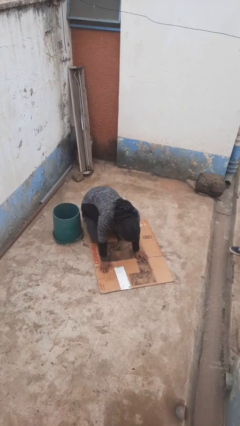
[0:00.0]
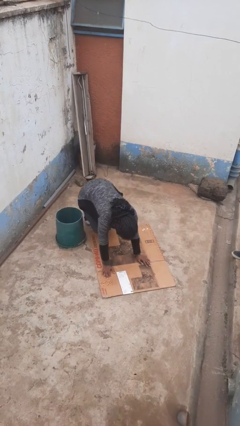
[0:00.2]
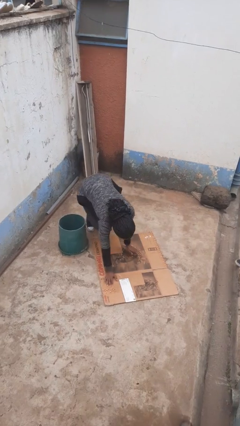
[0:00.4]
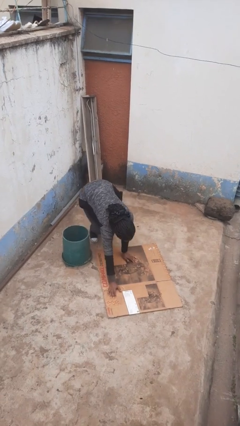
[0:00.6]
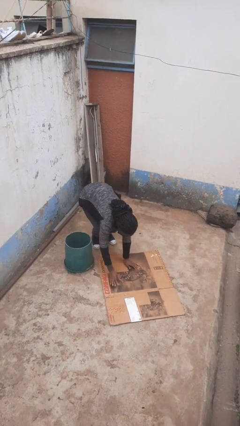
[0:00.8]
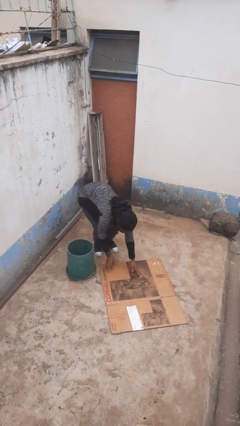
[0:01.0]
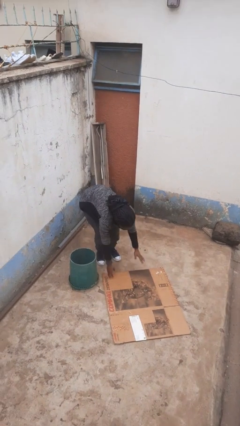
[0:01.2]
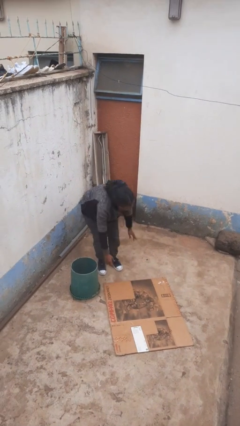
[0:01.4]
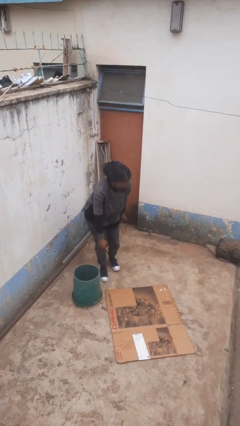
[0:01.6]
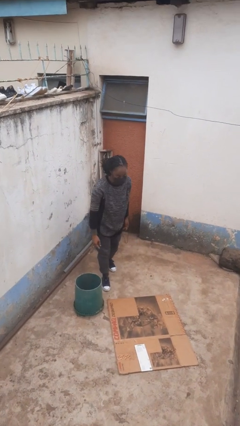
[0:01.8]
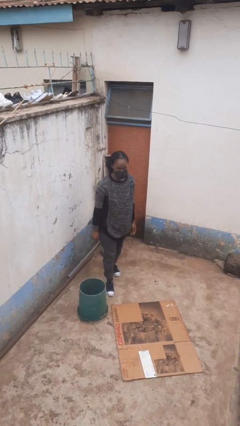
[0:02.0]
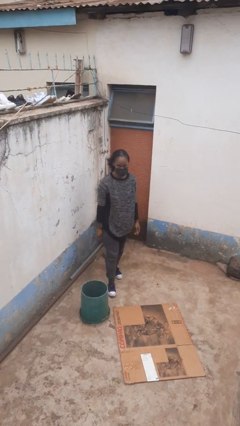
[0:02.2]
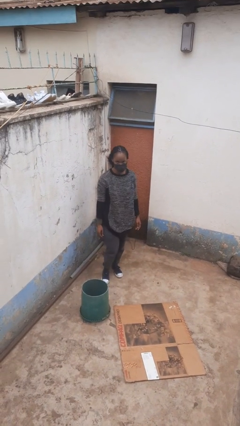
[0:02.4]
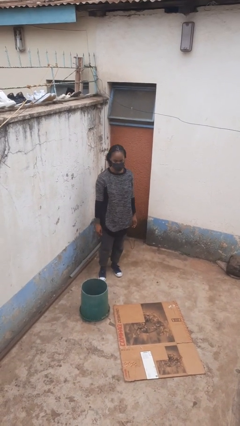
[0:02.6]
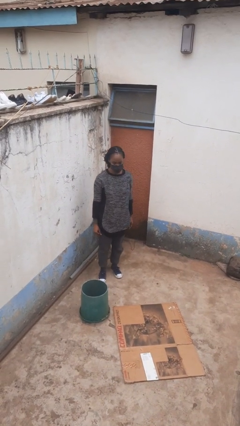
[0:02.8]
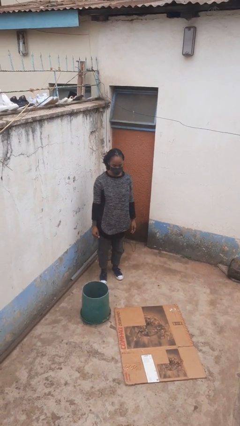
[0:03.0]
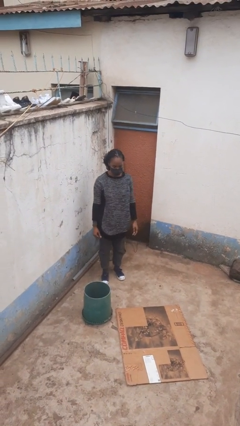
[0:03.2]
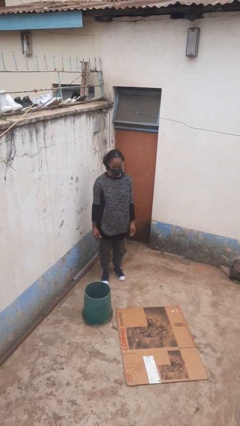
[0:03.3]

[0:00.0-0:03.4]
person stands up from floor

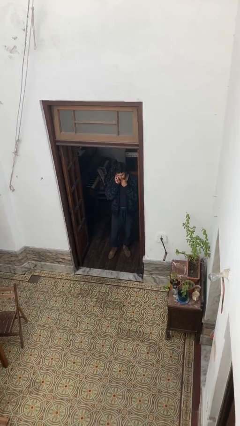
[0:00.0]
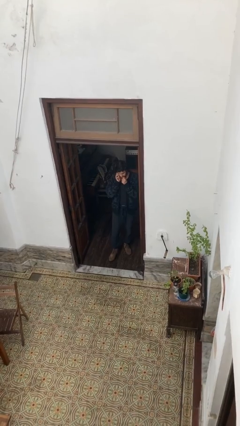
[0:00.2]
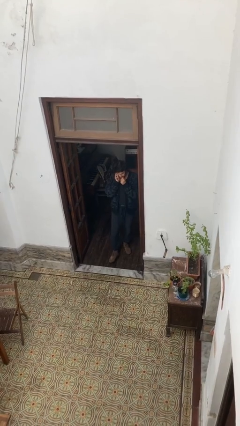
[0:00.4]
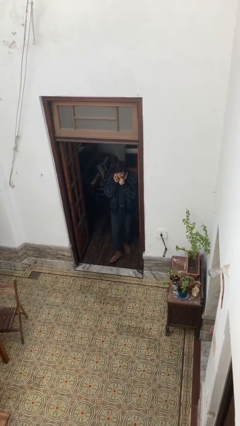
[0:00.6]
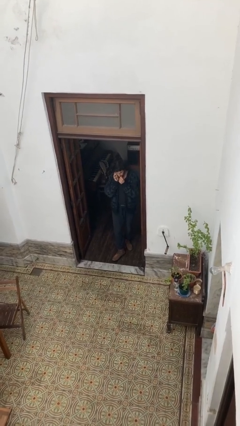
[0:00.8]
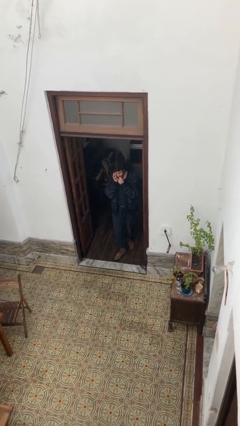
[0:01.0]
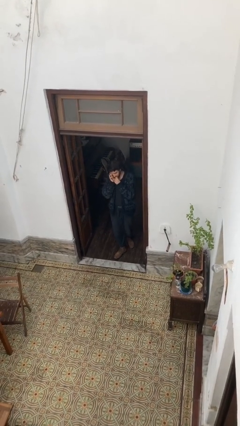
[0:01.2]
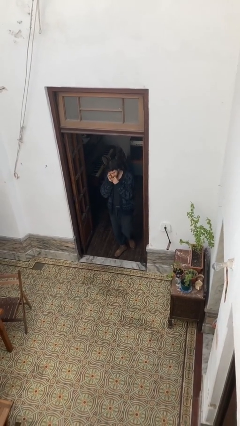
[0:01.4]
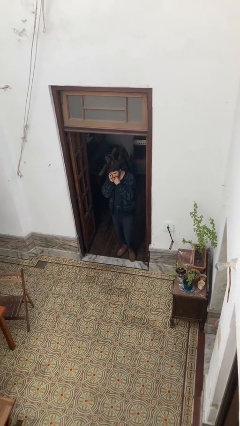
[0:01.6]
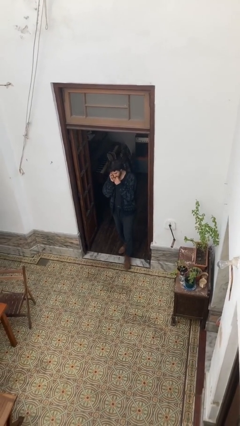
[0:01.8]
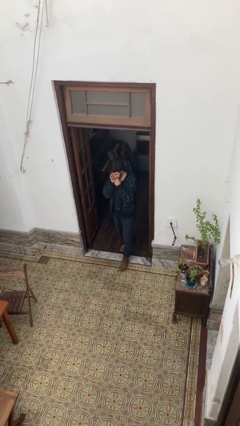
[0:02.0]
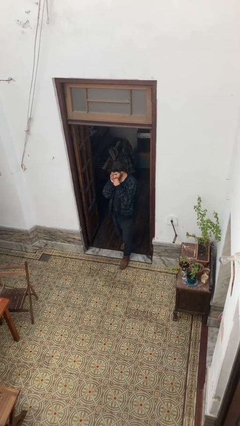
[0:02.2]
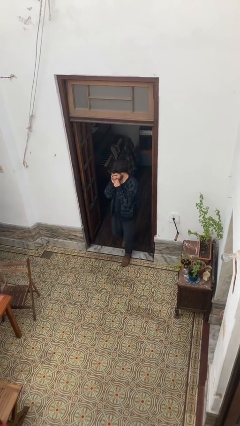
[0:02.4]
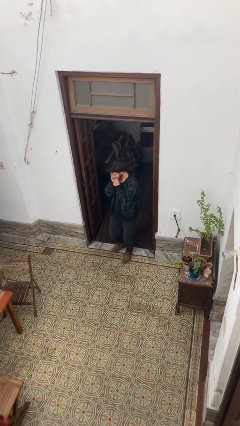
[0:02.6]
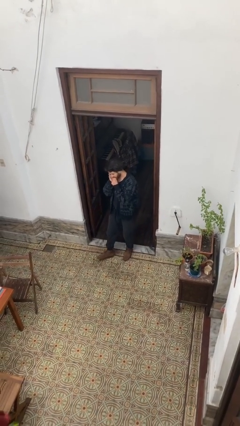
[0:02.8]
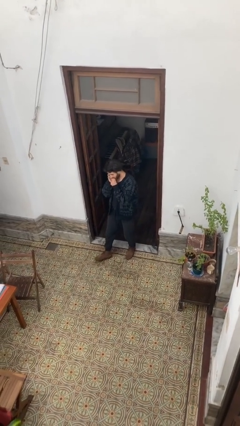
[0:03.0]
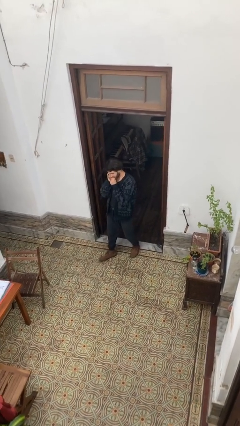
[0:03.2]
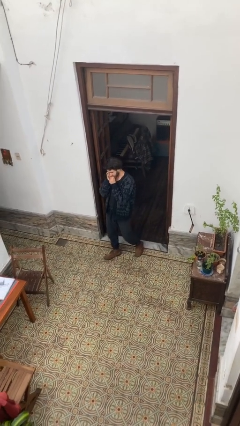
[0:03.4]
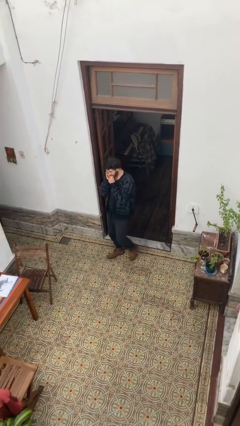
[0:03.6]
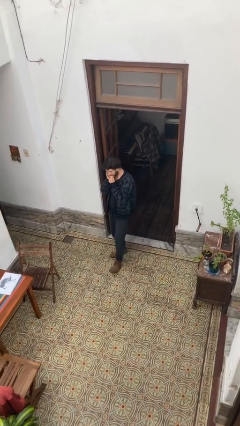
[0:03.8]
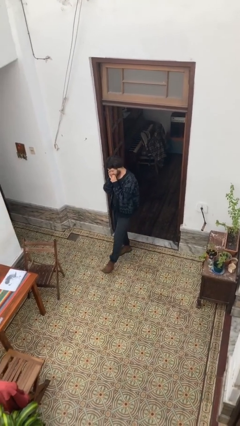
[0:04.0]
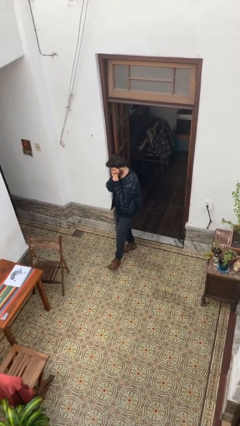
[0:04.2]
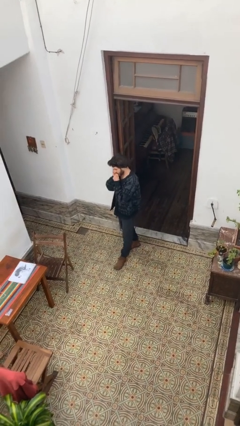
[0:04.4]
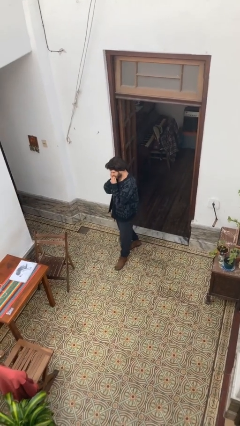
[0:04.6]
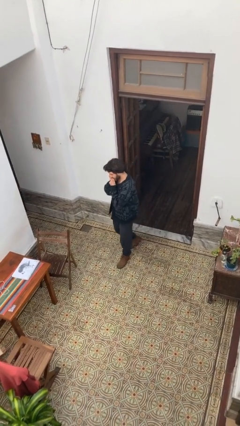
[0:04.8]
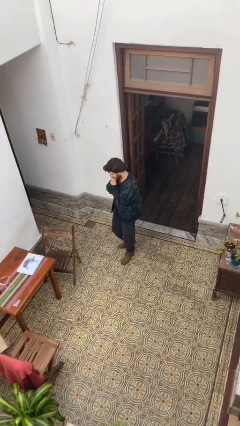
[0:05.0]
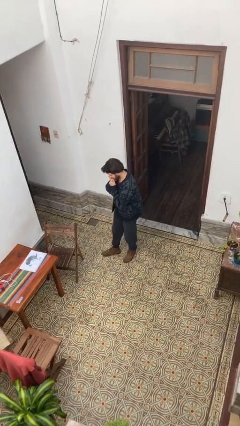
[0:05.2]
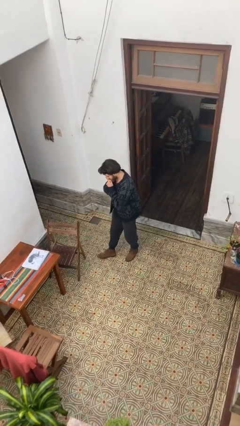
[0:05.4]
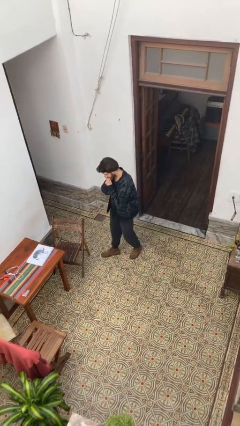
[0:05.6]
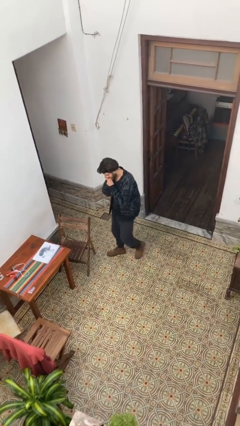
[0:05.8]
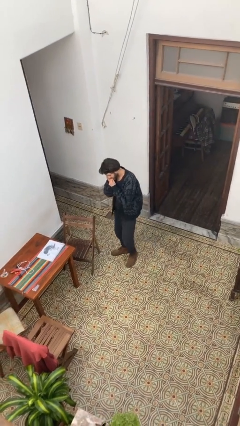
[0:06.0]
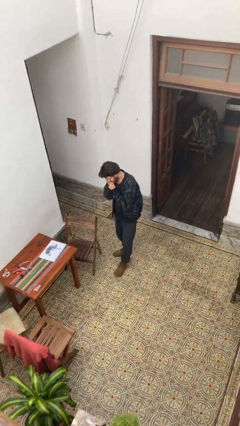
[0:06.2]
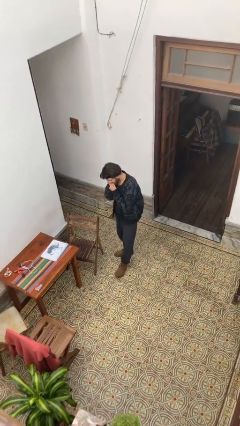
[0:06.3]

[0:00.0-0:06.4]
person enters scene through structure

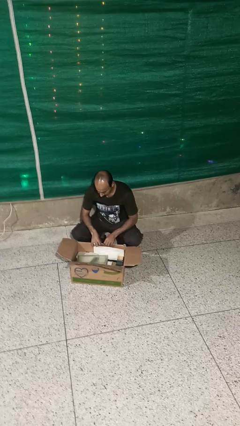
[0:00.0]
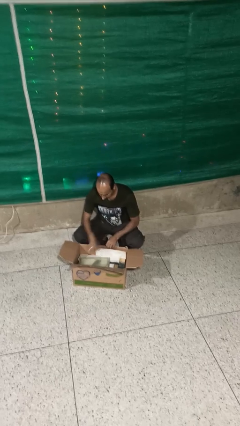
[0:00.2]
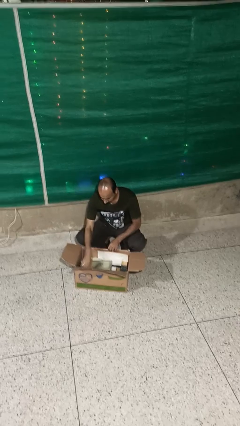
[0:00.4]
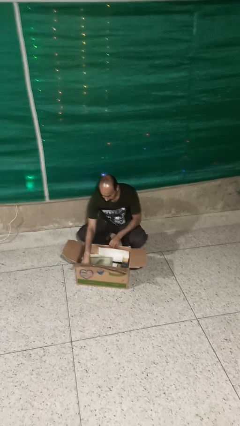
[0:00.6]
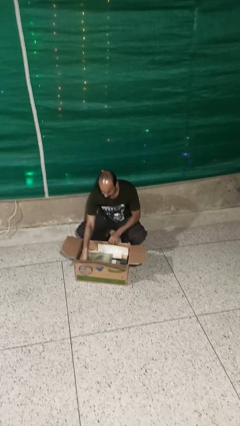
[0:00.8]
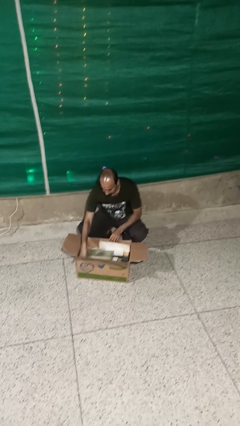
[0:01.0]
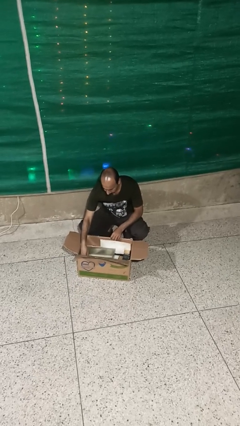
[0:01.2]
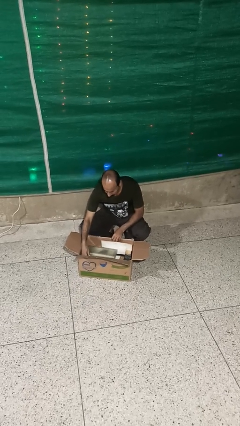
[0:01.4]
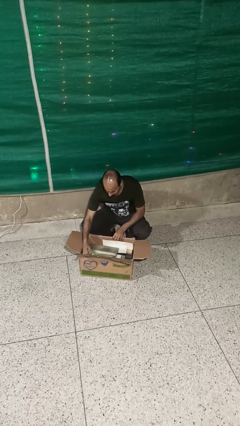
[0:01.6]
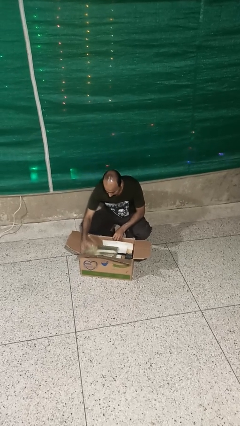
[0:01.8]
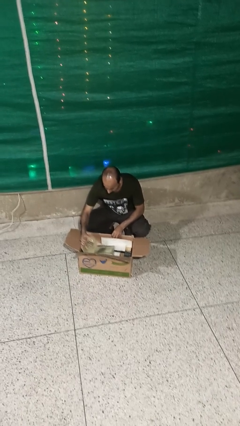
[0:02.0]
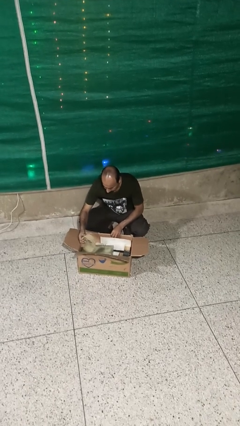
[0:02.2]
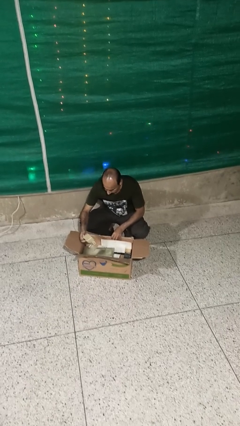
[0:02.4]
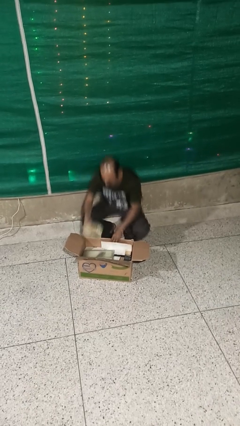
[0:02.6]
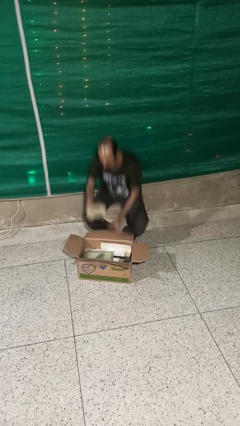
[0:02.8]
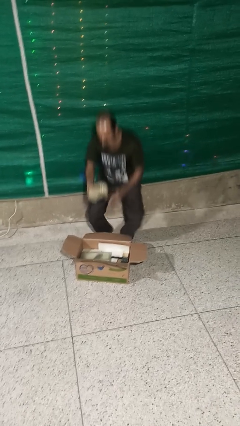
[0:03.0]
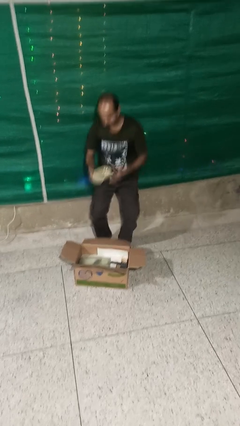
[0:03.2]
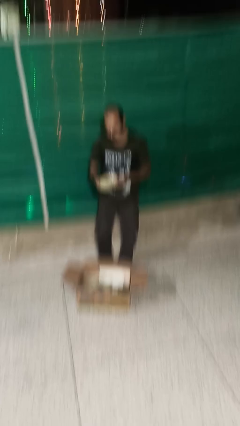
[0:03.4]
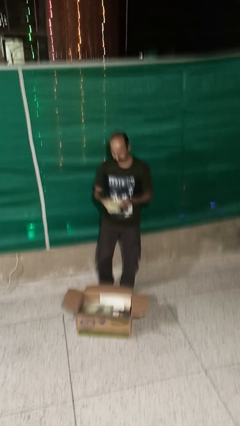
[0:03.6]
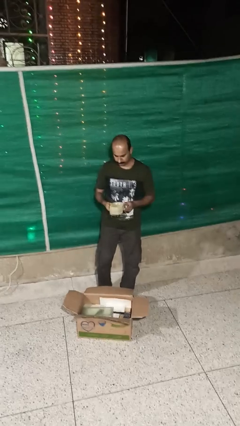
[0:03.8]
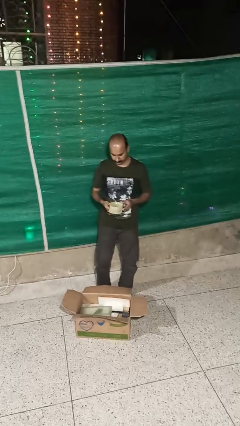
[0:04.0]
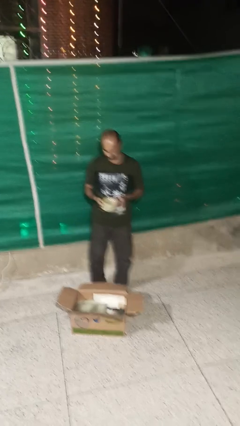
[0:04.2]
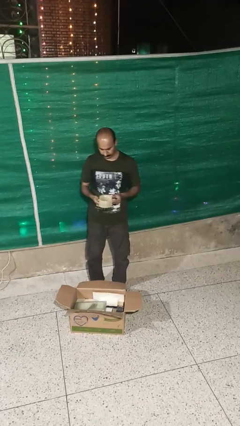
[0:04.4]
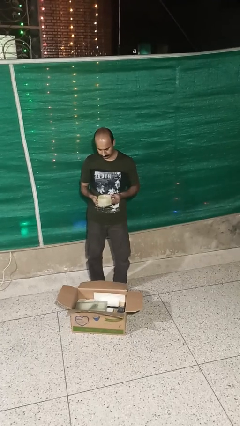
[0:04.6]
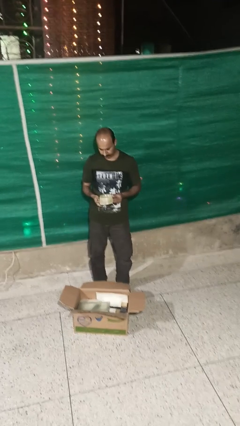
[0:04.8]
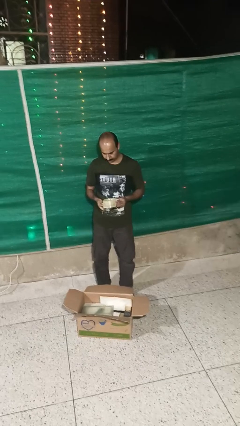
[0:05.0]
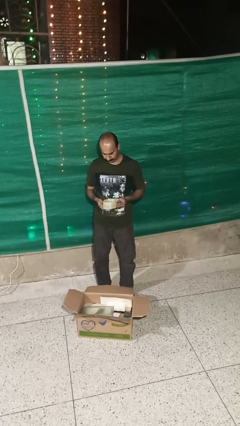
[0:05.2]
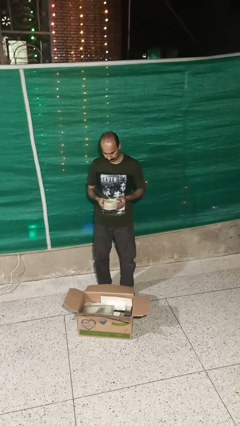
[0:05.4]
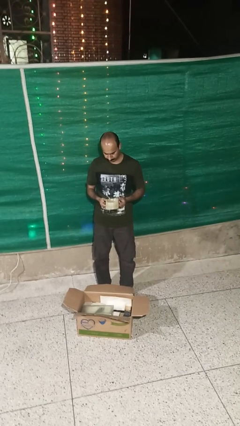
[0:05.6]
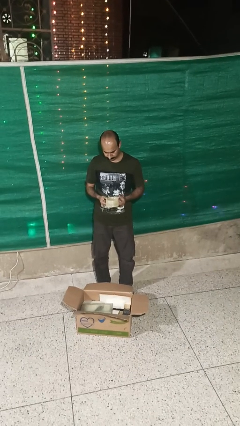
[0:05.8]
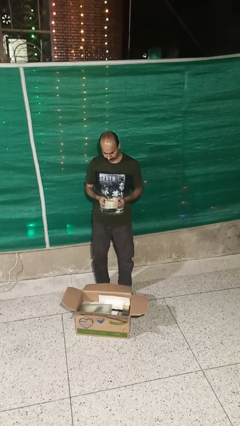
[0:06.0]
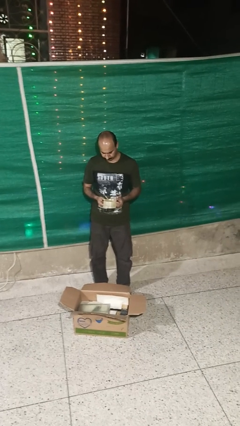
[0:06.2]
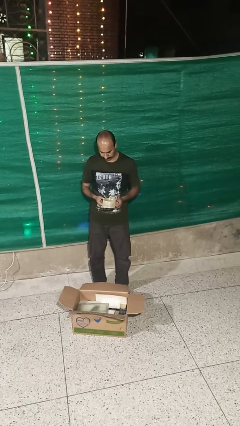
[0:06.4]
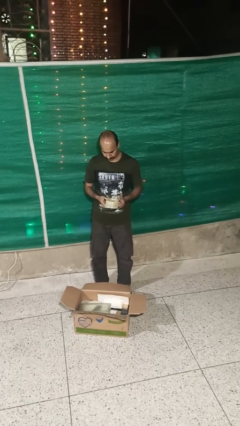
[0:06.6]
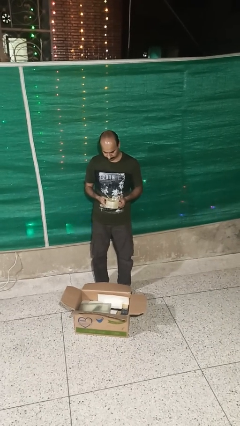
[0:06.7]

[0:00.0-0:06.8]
person takes object from box

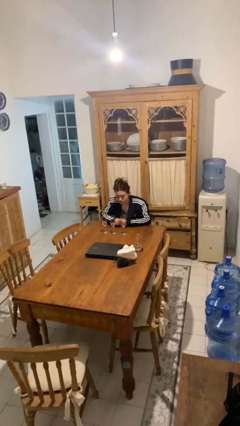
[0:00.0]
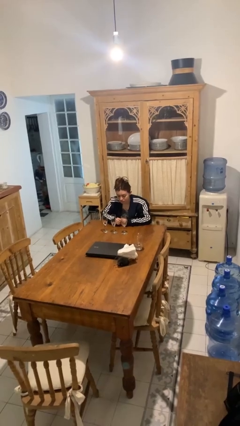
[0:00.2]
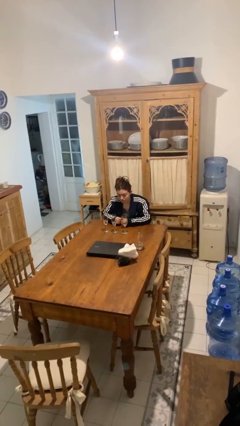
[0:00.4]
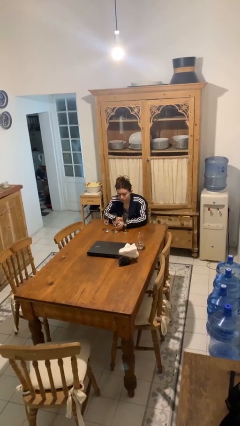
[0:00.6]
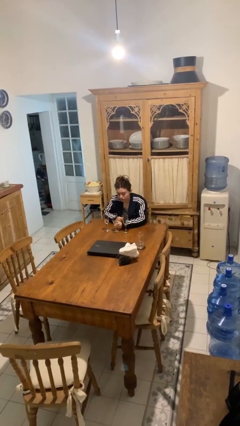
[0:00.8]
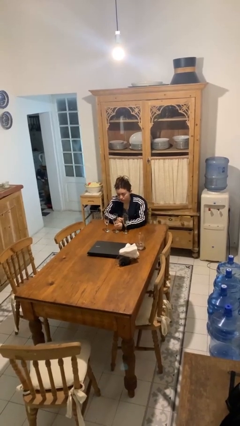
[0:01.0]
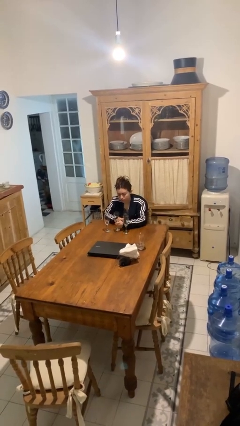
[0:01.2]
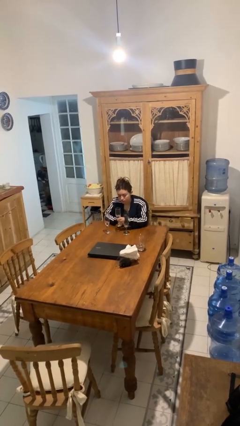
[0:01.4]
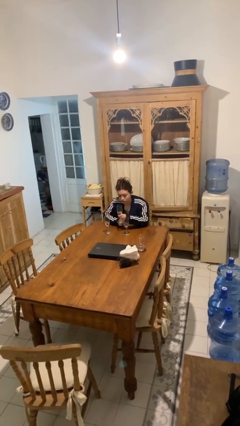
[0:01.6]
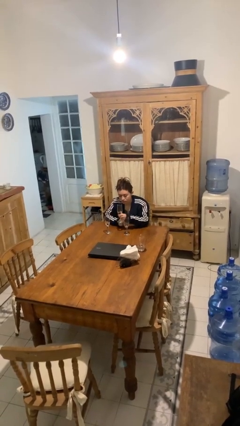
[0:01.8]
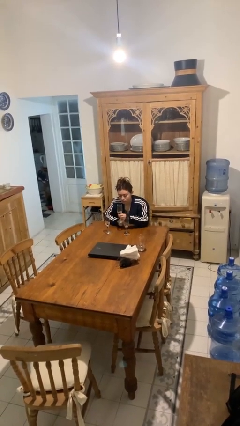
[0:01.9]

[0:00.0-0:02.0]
person picks up object from table
